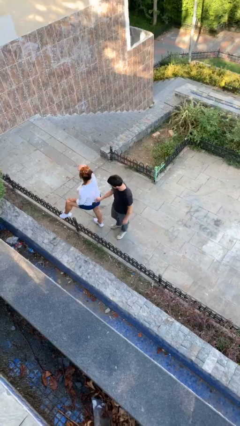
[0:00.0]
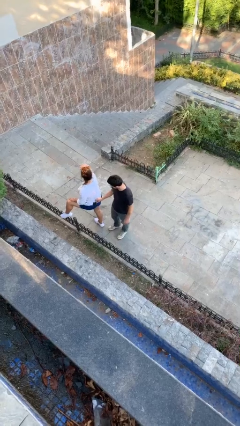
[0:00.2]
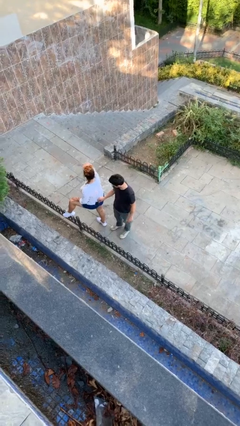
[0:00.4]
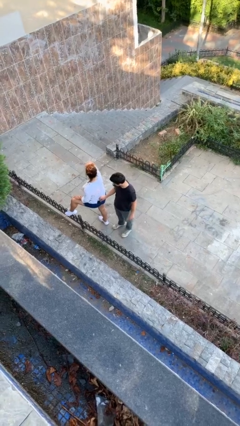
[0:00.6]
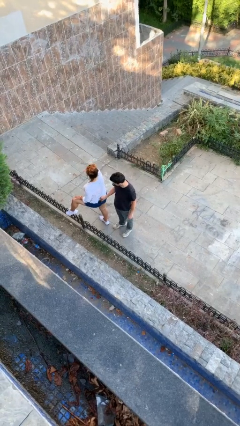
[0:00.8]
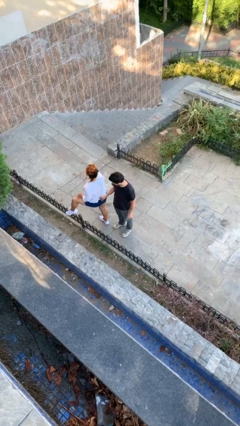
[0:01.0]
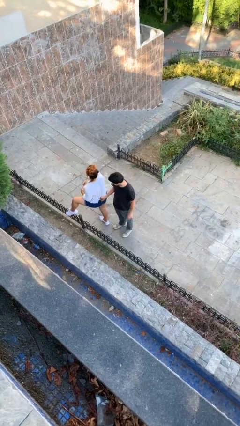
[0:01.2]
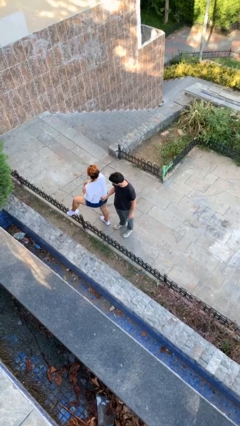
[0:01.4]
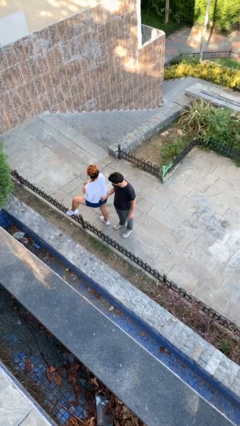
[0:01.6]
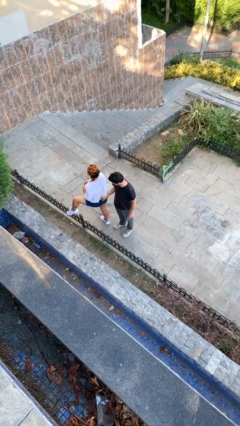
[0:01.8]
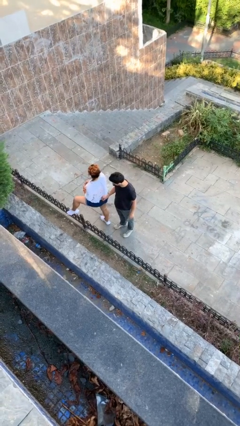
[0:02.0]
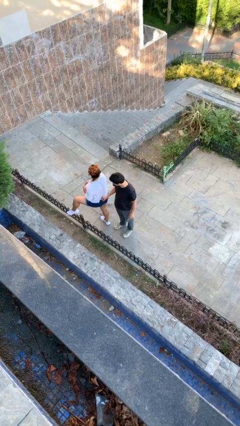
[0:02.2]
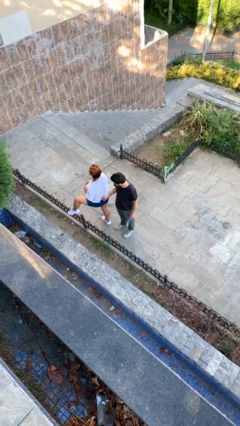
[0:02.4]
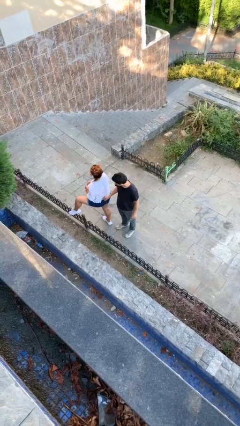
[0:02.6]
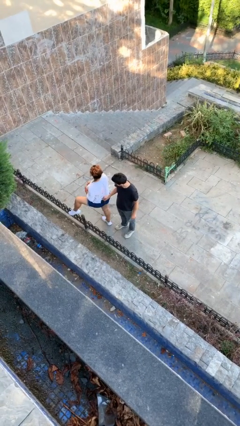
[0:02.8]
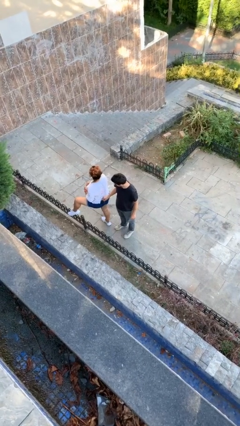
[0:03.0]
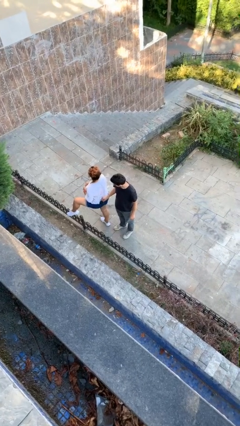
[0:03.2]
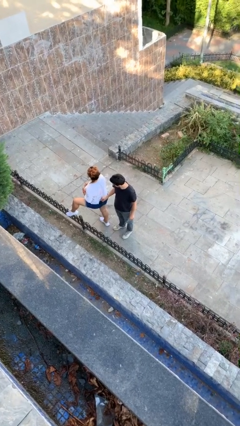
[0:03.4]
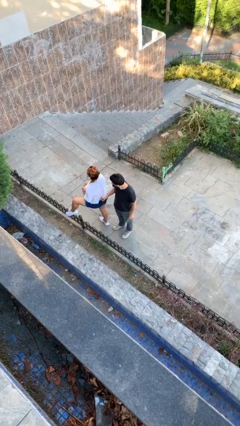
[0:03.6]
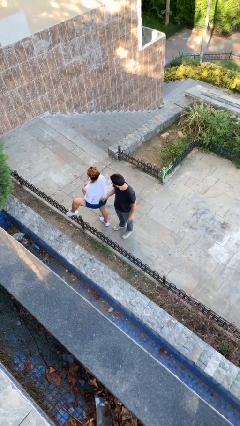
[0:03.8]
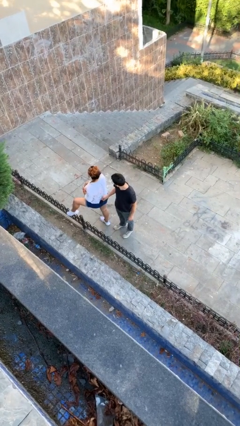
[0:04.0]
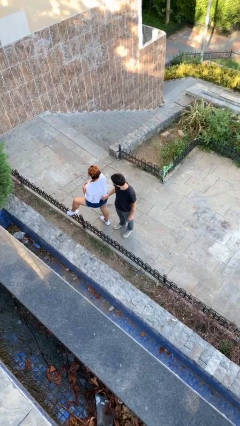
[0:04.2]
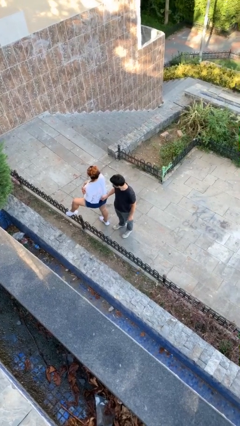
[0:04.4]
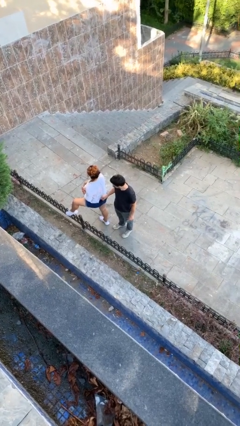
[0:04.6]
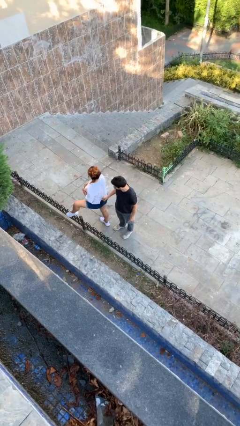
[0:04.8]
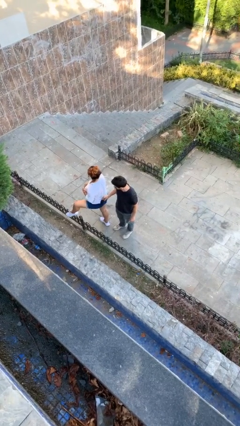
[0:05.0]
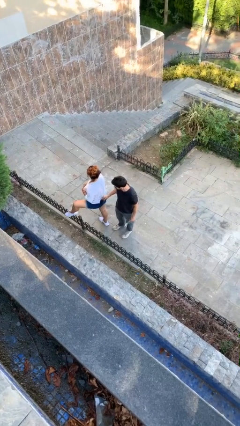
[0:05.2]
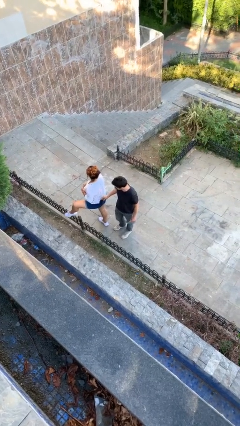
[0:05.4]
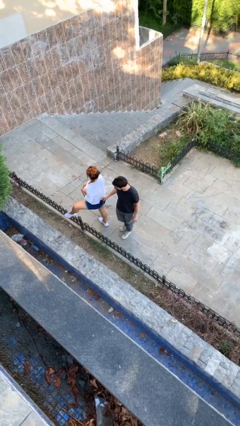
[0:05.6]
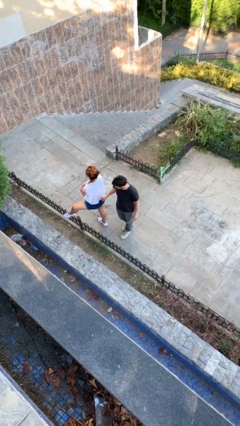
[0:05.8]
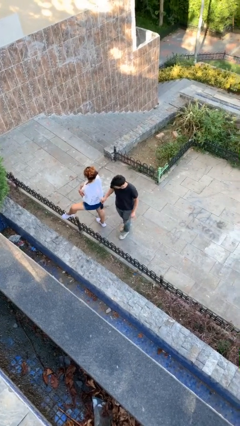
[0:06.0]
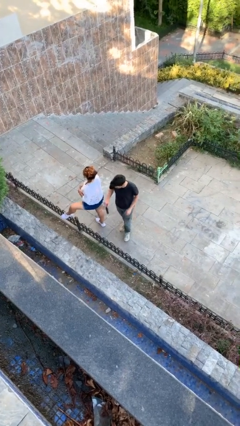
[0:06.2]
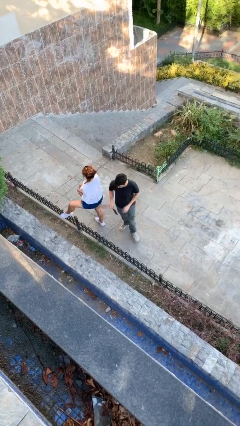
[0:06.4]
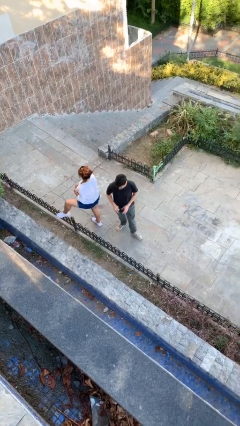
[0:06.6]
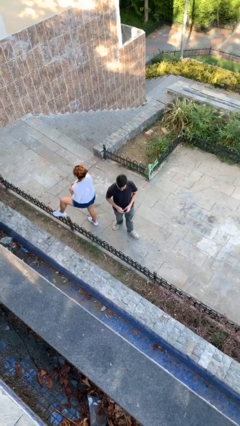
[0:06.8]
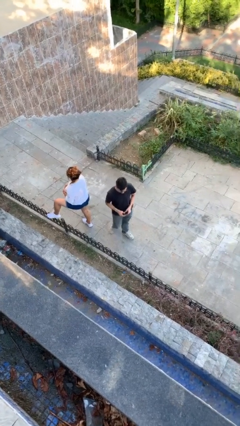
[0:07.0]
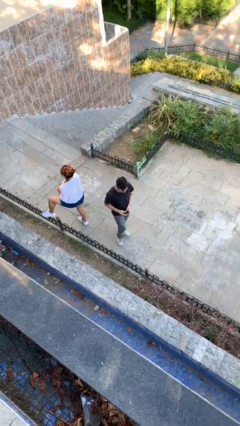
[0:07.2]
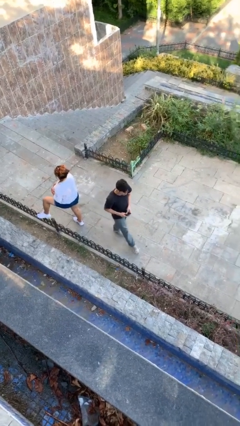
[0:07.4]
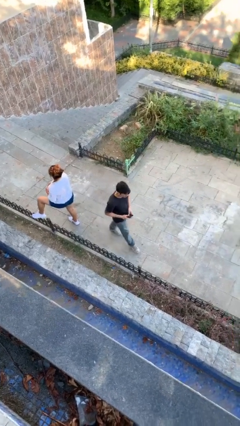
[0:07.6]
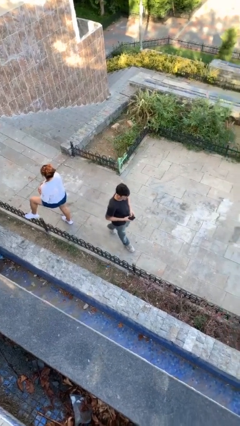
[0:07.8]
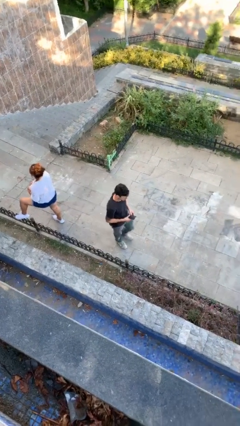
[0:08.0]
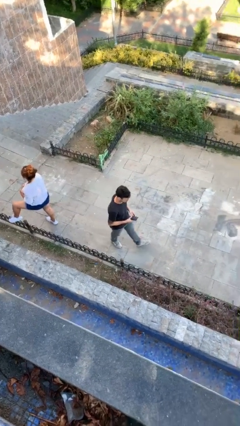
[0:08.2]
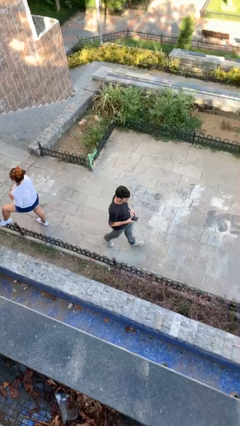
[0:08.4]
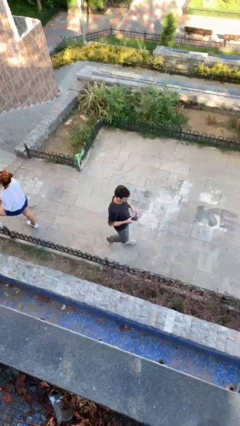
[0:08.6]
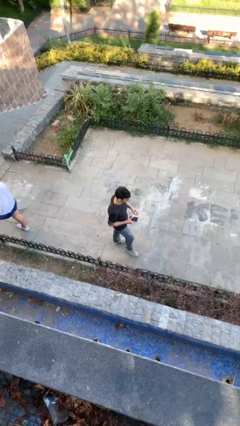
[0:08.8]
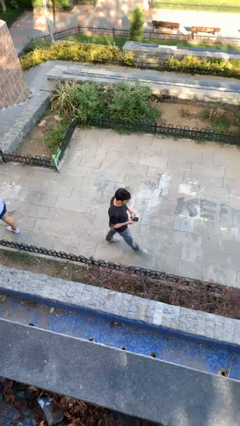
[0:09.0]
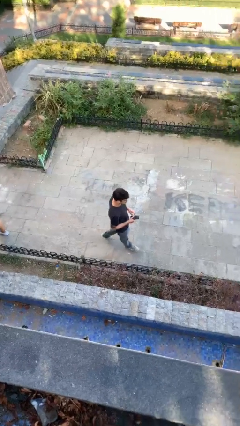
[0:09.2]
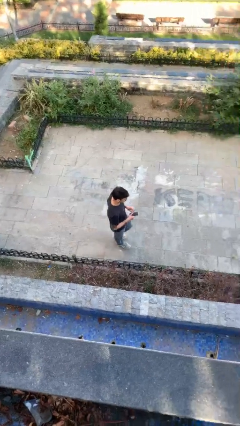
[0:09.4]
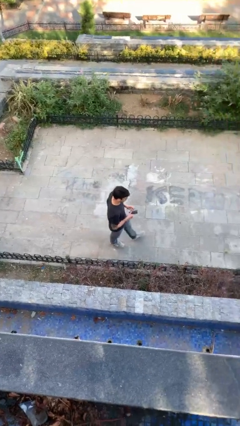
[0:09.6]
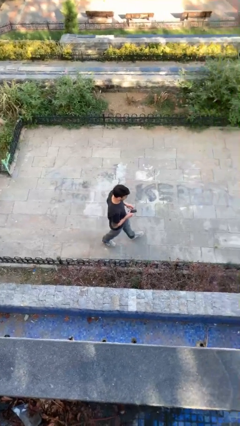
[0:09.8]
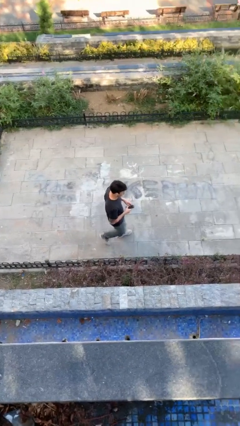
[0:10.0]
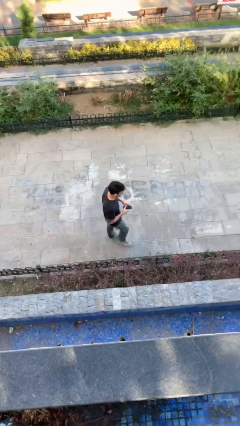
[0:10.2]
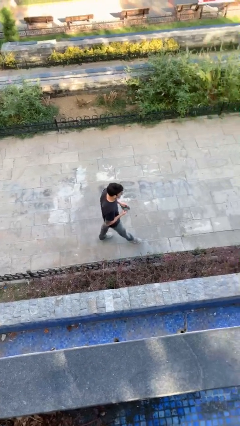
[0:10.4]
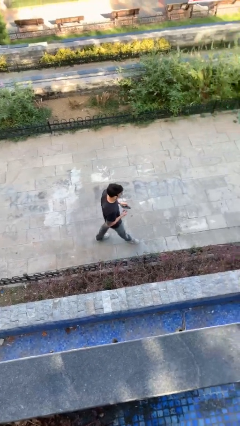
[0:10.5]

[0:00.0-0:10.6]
person steals object from person

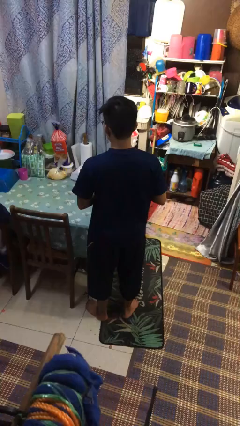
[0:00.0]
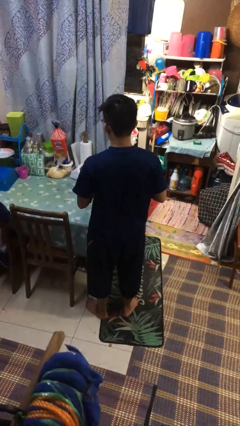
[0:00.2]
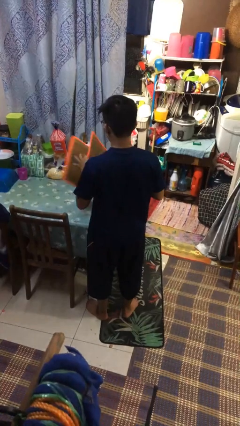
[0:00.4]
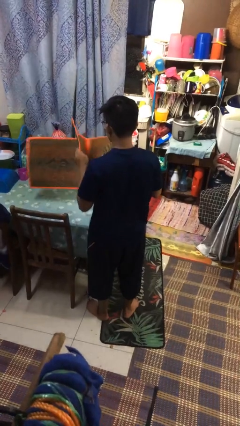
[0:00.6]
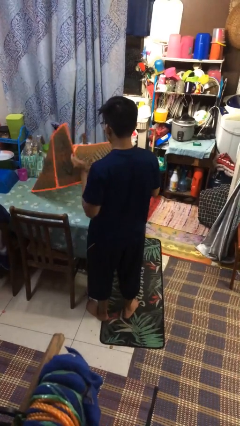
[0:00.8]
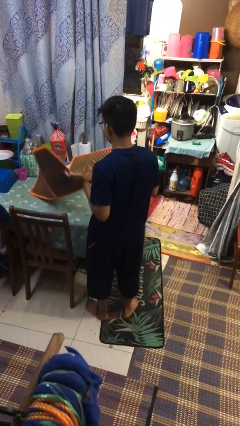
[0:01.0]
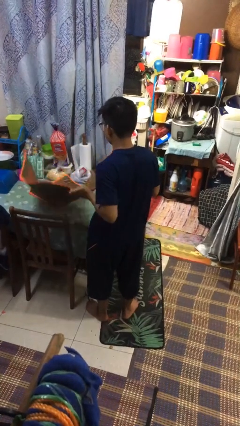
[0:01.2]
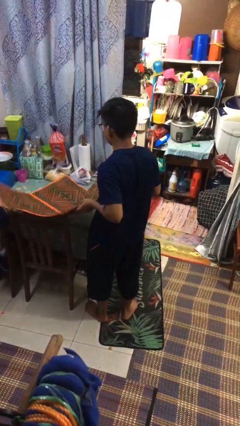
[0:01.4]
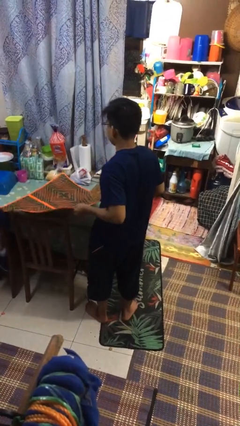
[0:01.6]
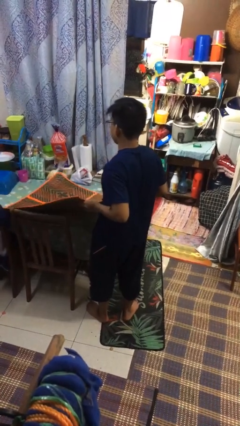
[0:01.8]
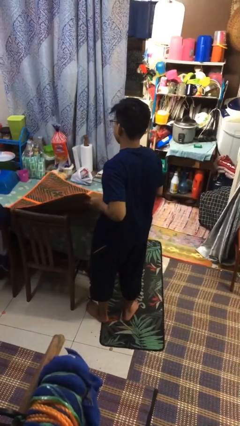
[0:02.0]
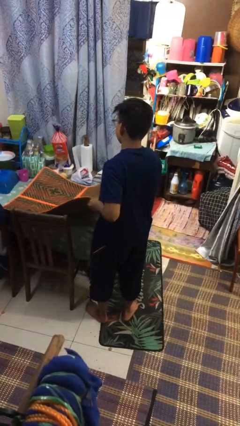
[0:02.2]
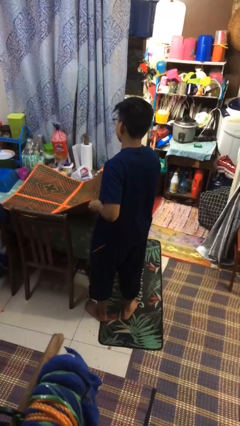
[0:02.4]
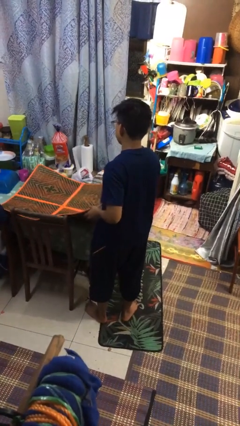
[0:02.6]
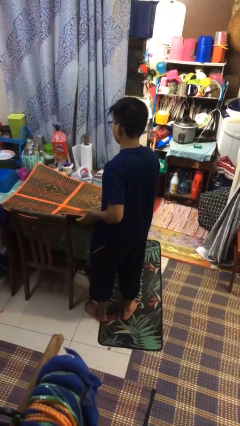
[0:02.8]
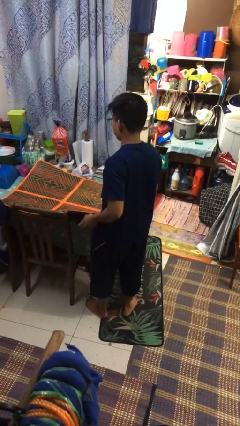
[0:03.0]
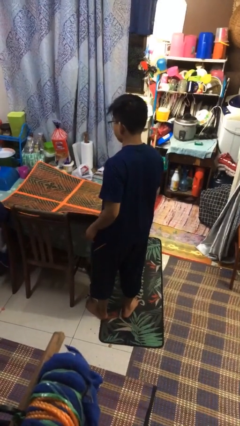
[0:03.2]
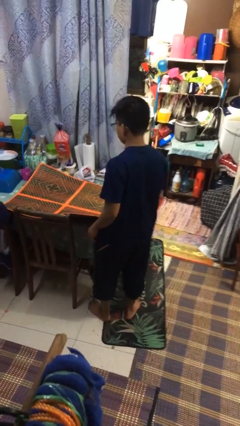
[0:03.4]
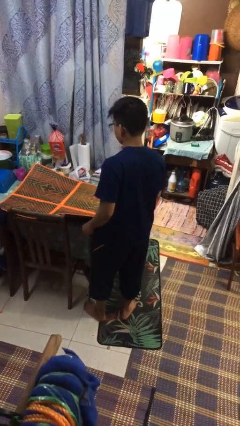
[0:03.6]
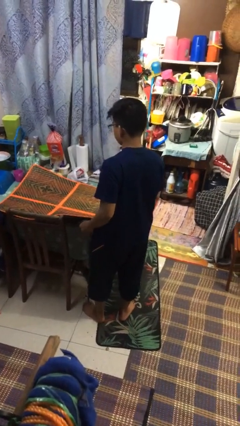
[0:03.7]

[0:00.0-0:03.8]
person spreads tablecloth

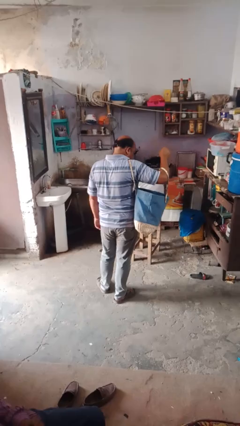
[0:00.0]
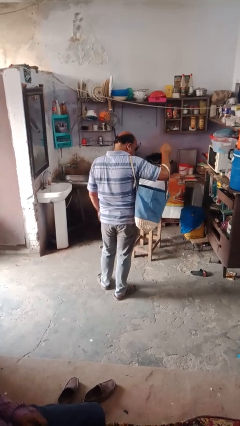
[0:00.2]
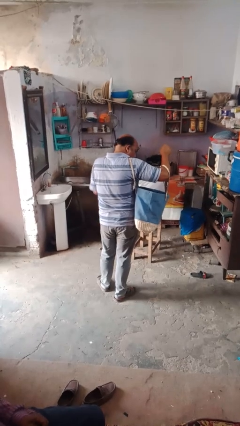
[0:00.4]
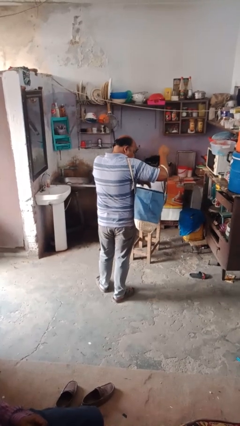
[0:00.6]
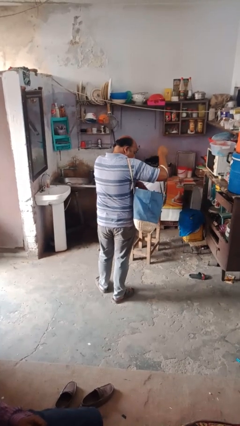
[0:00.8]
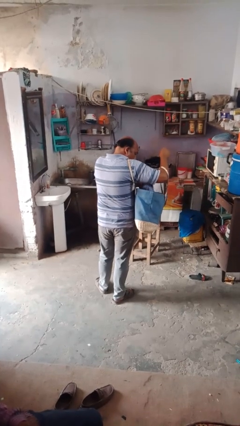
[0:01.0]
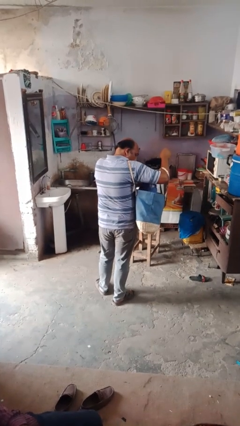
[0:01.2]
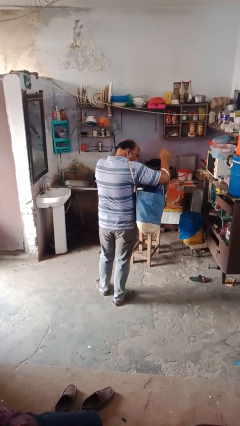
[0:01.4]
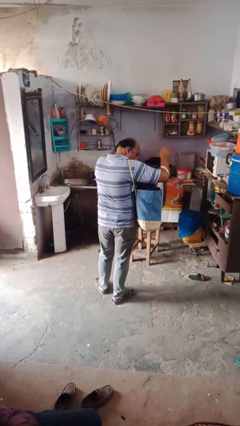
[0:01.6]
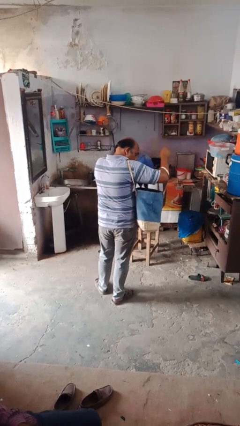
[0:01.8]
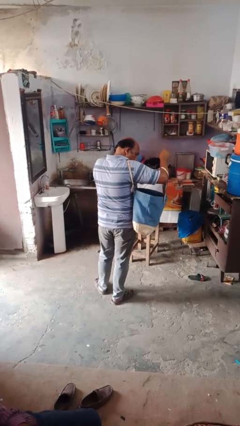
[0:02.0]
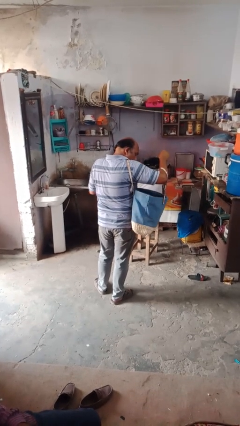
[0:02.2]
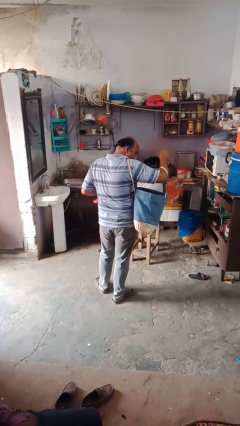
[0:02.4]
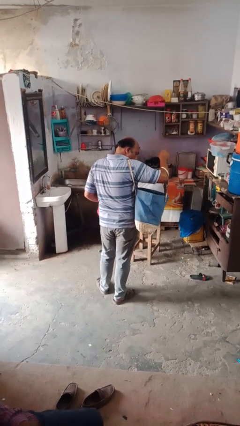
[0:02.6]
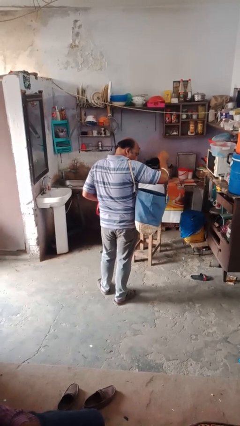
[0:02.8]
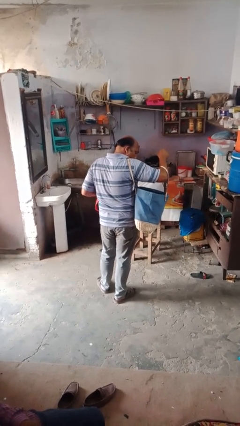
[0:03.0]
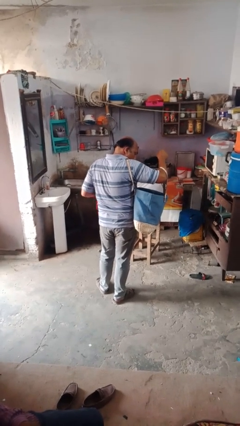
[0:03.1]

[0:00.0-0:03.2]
person takes object from bag
